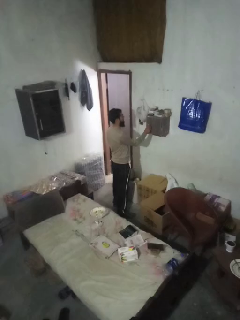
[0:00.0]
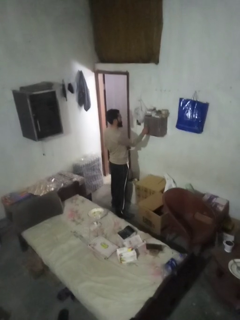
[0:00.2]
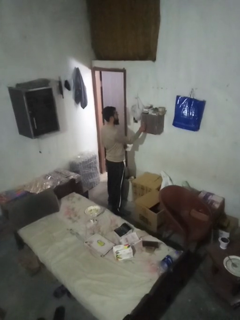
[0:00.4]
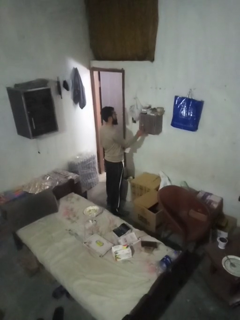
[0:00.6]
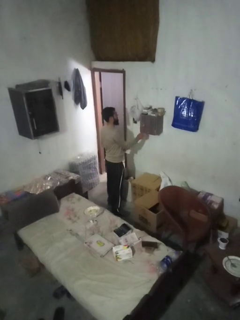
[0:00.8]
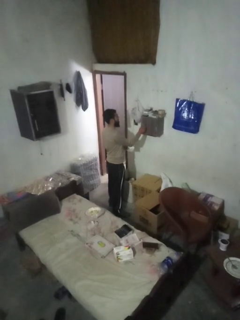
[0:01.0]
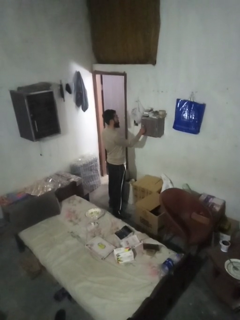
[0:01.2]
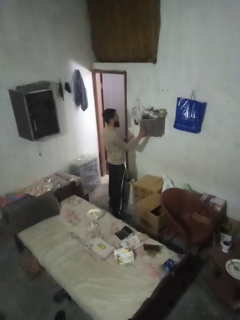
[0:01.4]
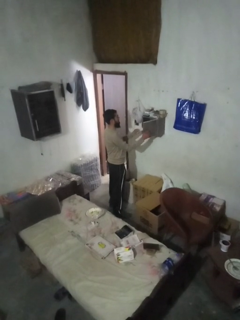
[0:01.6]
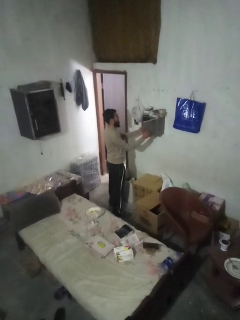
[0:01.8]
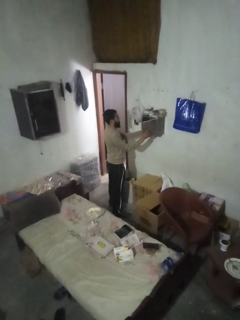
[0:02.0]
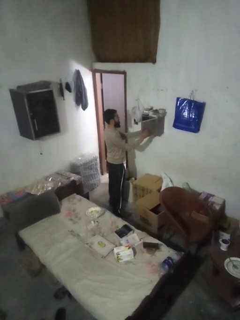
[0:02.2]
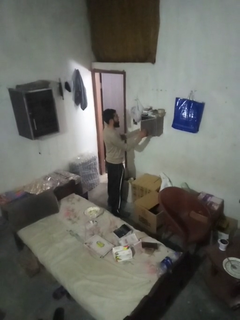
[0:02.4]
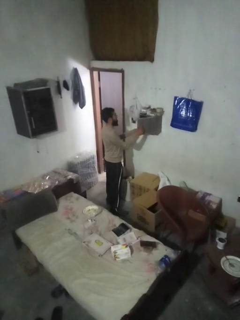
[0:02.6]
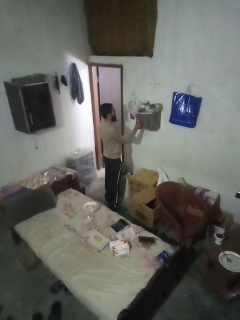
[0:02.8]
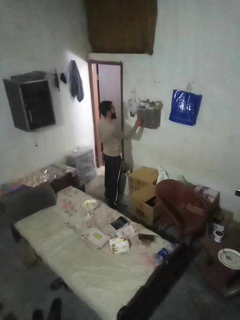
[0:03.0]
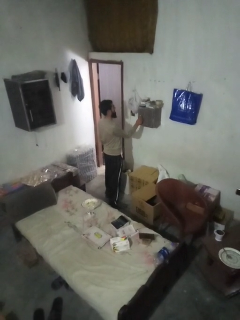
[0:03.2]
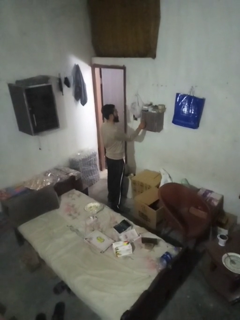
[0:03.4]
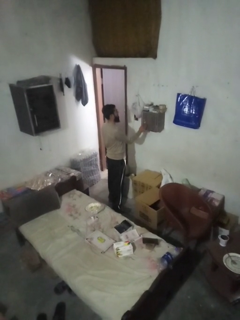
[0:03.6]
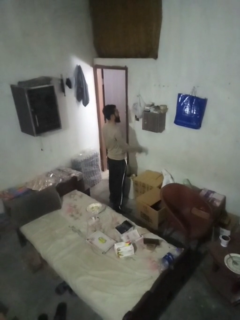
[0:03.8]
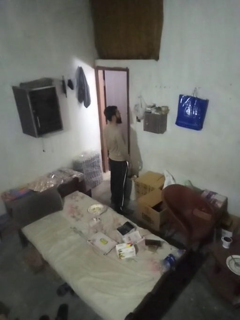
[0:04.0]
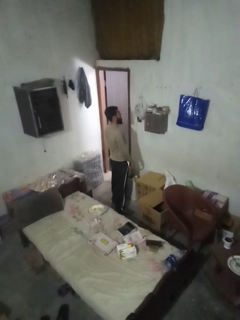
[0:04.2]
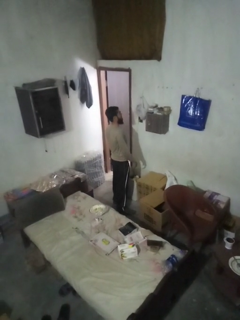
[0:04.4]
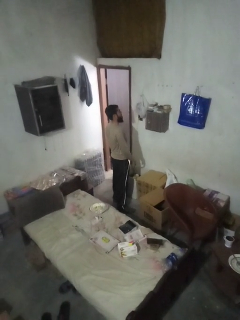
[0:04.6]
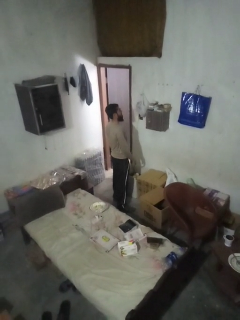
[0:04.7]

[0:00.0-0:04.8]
person puts letters in mailbox

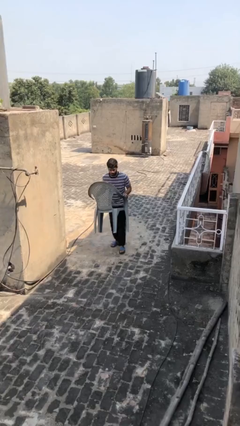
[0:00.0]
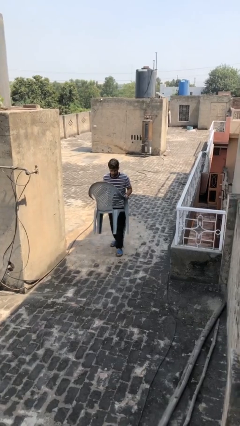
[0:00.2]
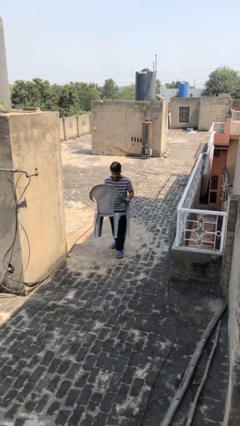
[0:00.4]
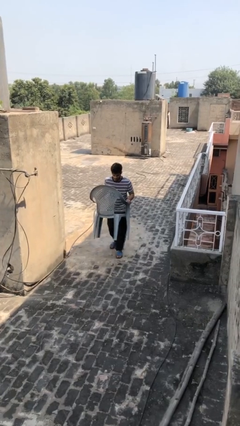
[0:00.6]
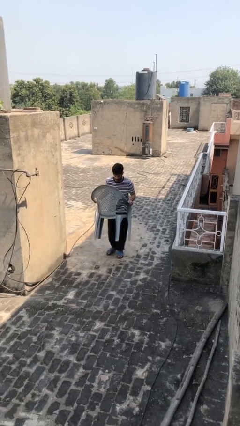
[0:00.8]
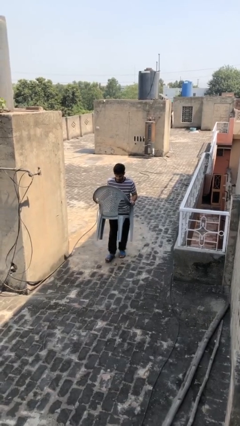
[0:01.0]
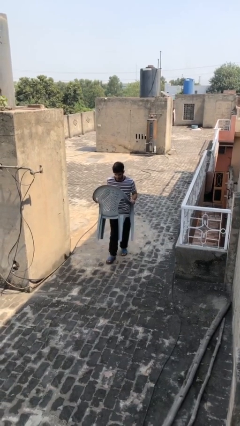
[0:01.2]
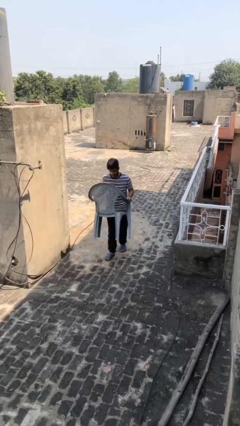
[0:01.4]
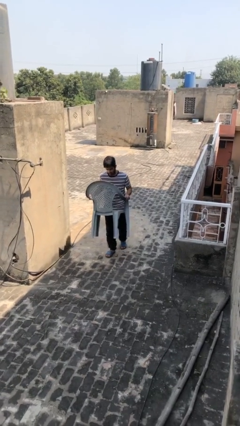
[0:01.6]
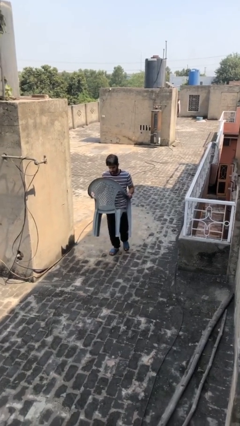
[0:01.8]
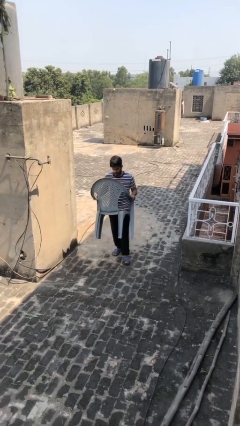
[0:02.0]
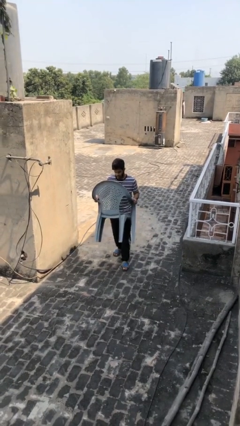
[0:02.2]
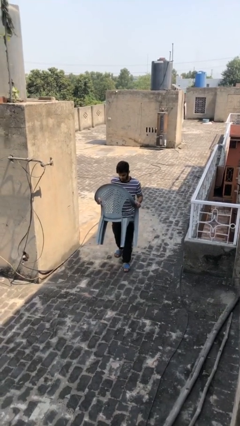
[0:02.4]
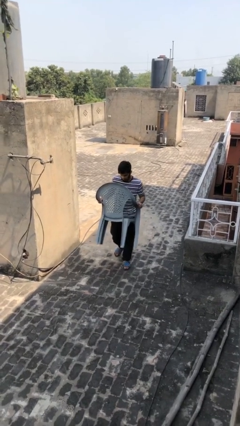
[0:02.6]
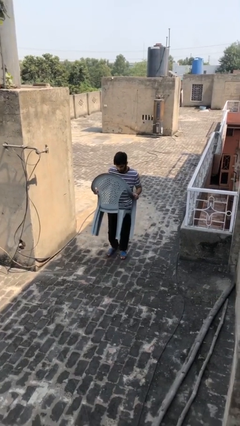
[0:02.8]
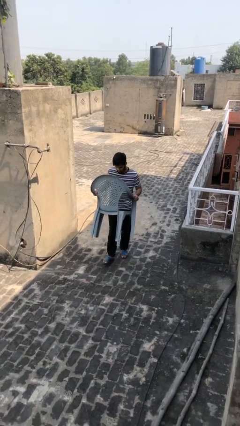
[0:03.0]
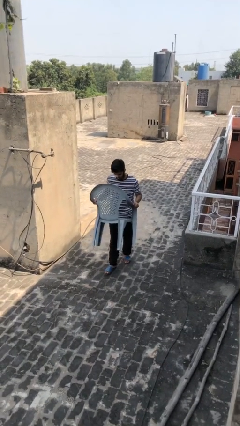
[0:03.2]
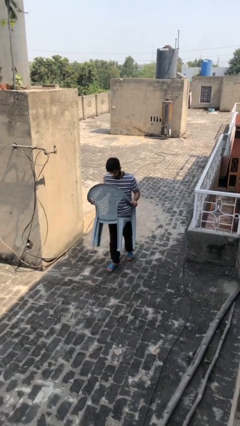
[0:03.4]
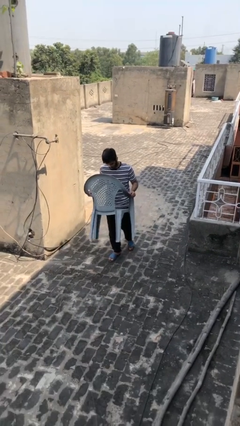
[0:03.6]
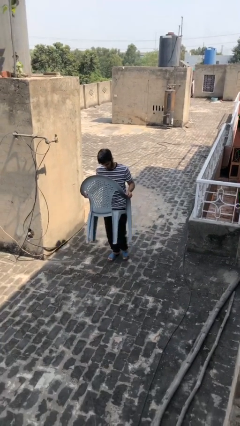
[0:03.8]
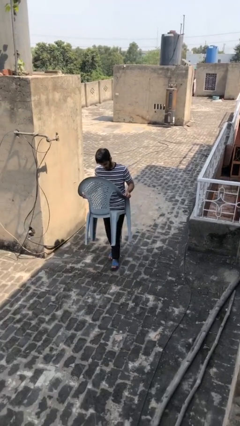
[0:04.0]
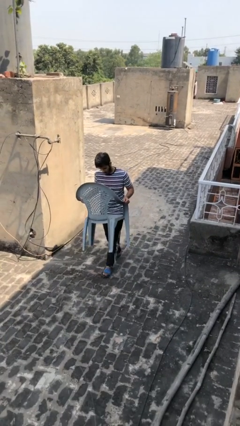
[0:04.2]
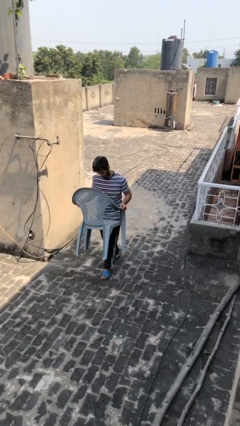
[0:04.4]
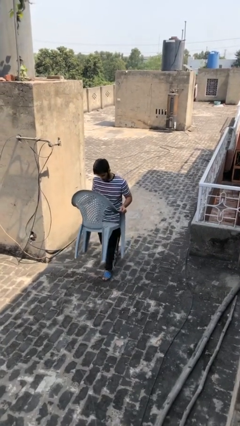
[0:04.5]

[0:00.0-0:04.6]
person carries heavy object

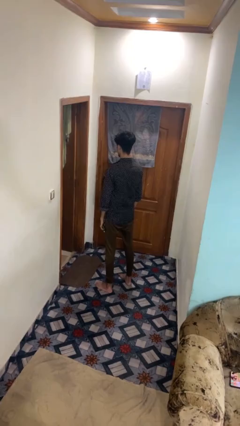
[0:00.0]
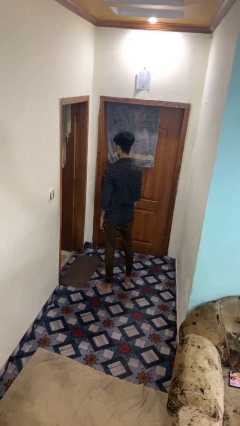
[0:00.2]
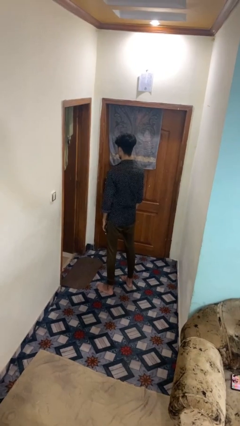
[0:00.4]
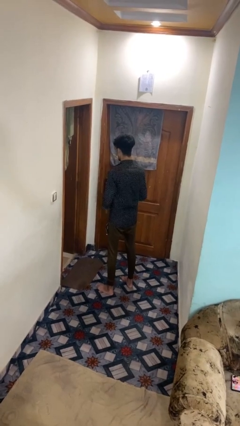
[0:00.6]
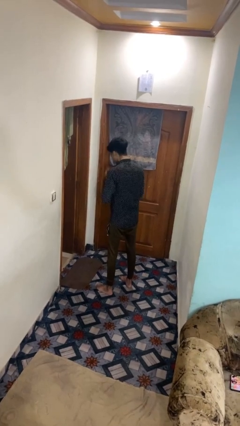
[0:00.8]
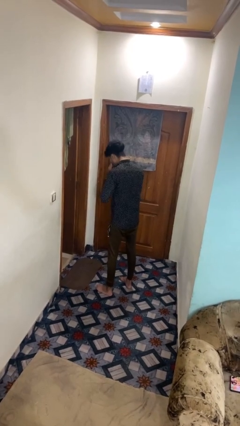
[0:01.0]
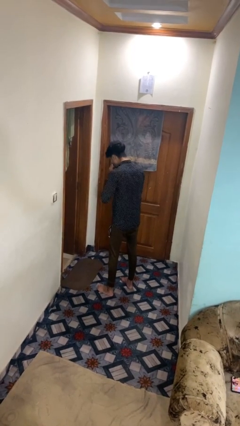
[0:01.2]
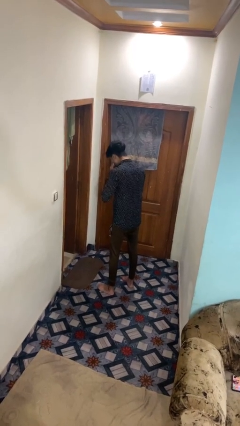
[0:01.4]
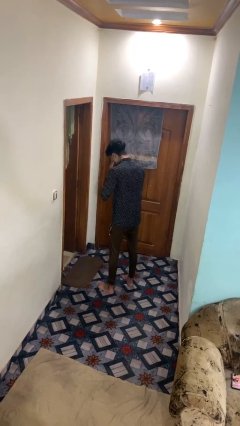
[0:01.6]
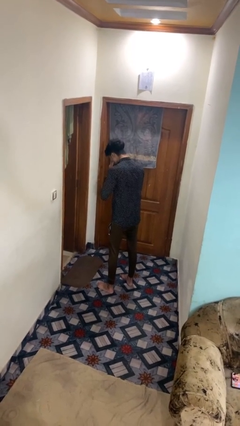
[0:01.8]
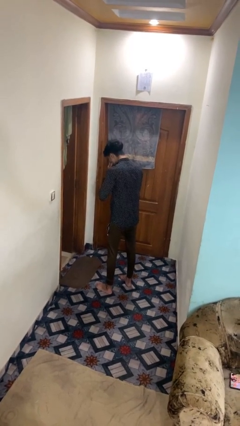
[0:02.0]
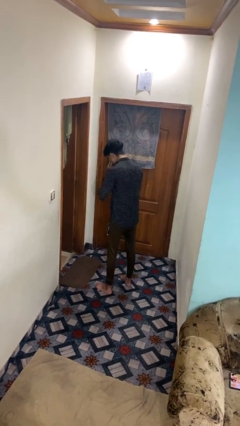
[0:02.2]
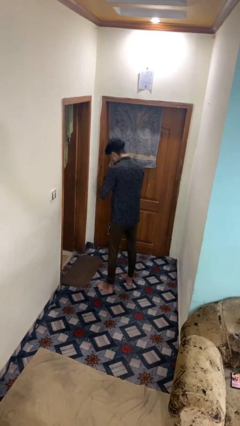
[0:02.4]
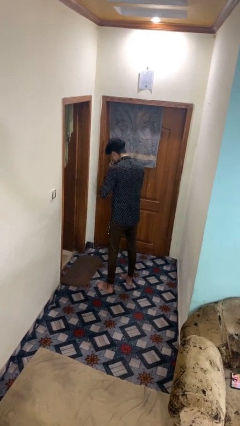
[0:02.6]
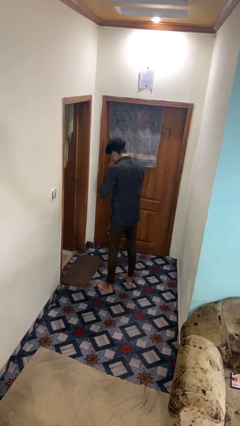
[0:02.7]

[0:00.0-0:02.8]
person sneezes into hand

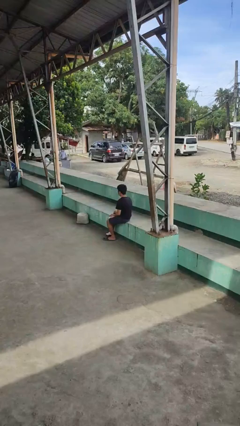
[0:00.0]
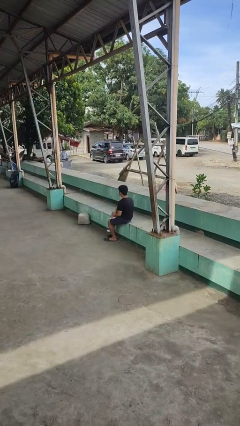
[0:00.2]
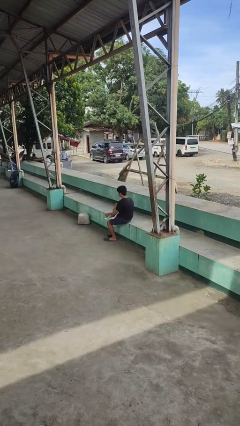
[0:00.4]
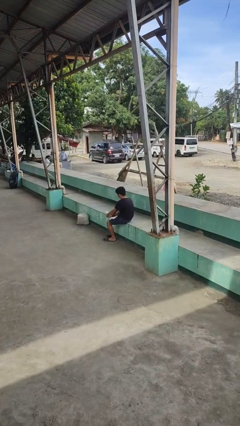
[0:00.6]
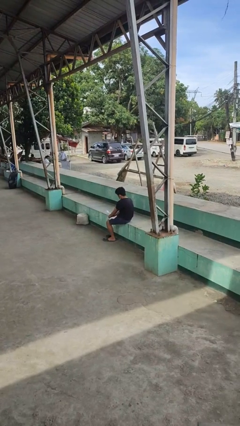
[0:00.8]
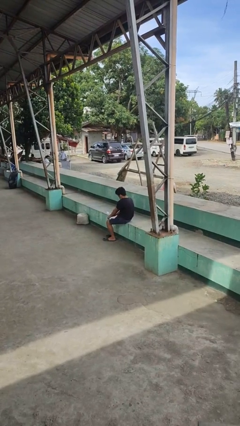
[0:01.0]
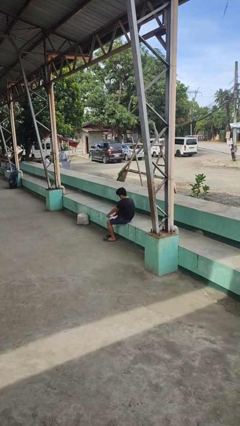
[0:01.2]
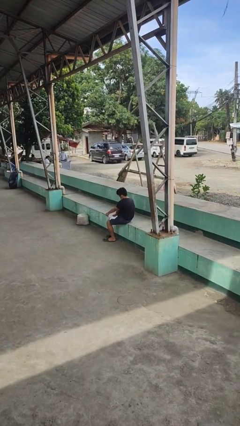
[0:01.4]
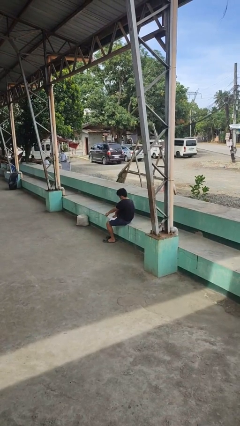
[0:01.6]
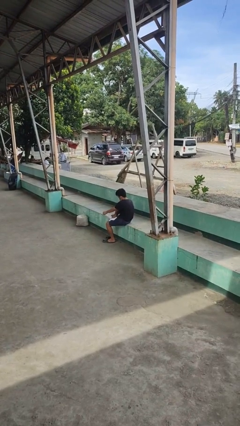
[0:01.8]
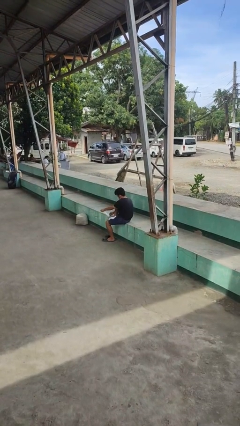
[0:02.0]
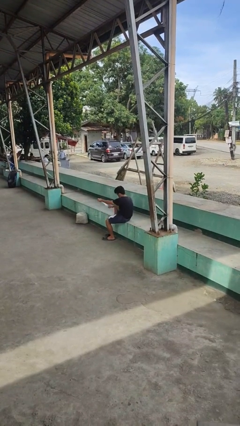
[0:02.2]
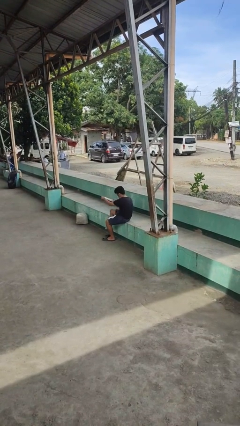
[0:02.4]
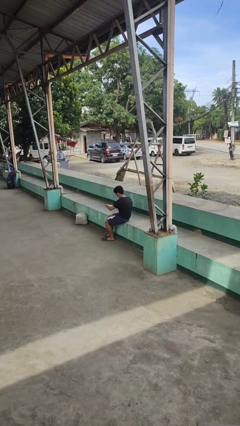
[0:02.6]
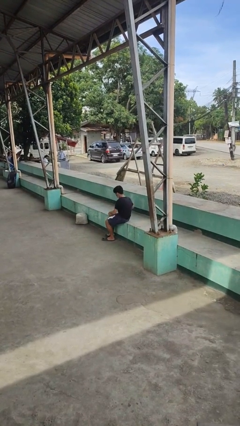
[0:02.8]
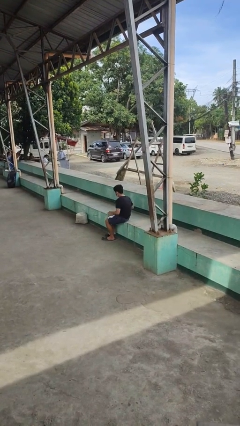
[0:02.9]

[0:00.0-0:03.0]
person takes off socks

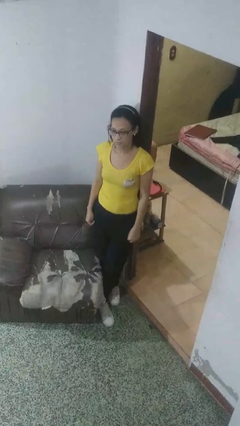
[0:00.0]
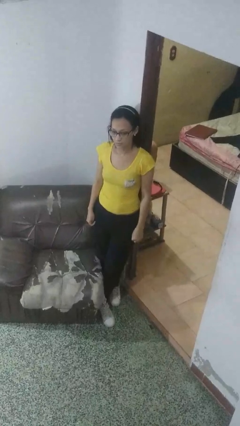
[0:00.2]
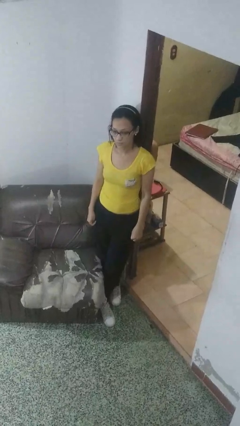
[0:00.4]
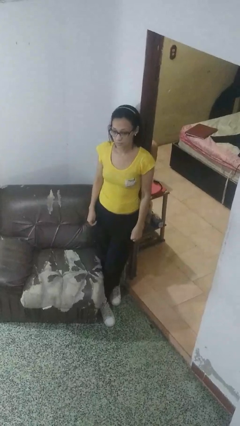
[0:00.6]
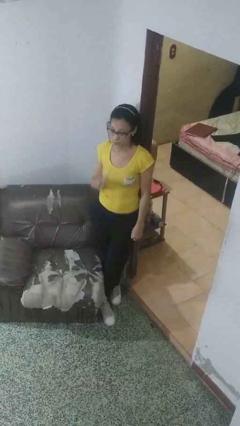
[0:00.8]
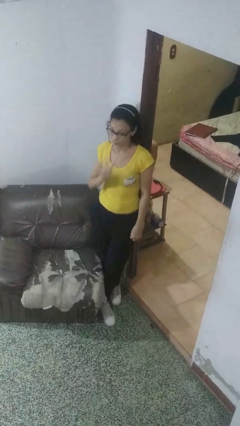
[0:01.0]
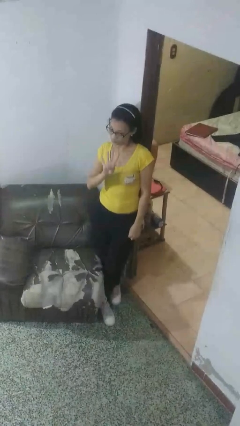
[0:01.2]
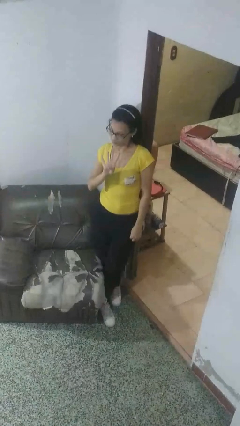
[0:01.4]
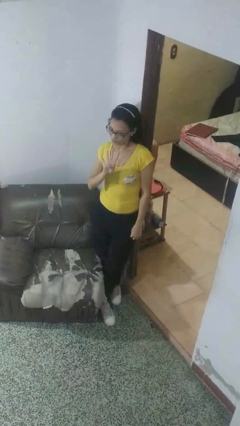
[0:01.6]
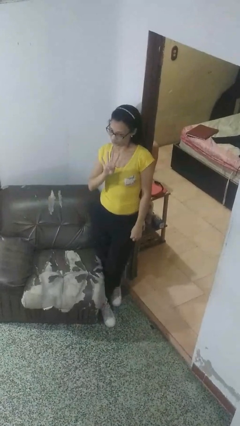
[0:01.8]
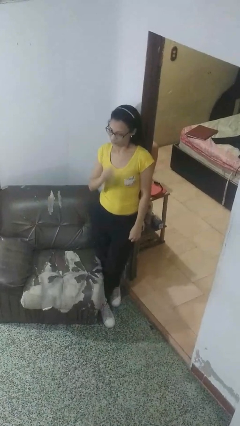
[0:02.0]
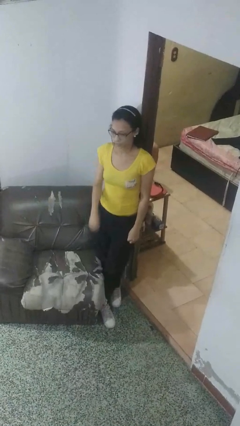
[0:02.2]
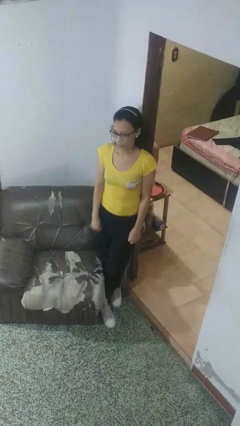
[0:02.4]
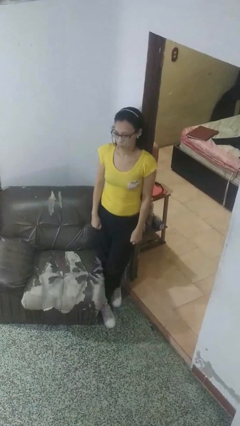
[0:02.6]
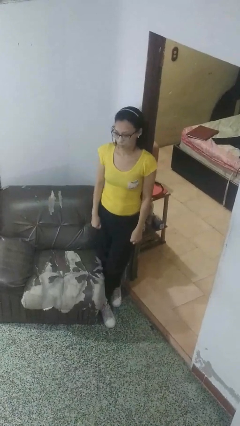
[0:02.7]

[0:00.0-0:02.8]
person gestures number four

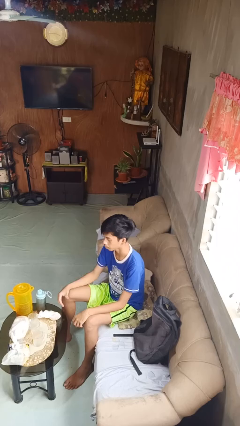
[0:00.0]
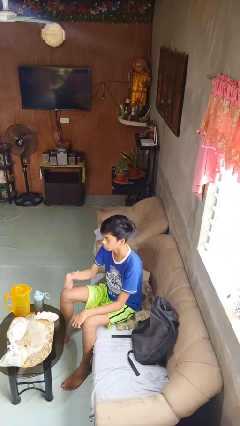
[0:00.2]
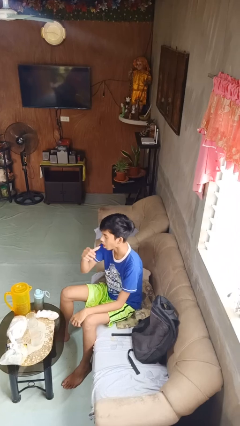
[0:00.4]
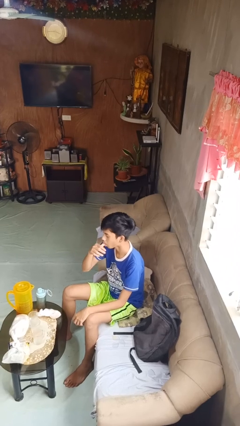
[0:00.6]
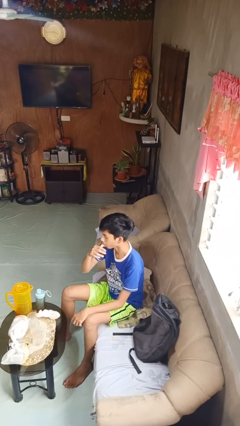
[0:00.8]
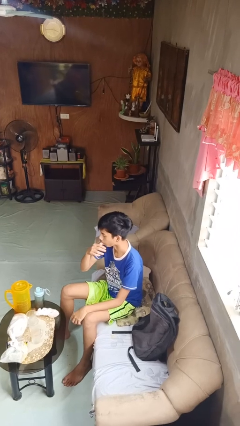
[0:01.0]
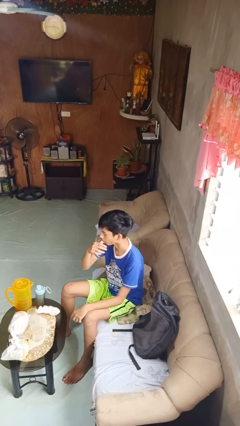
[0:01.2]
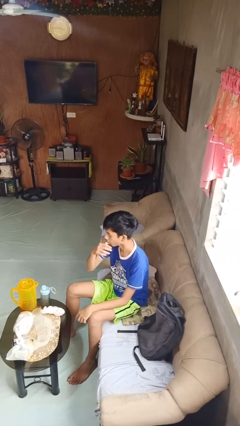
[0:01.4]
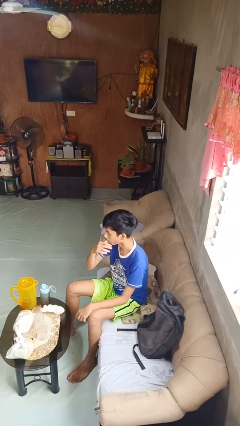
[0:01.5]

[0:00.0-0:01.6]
person licks fingers
